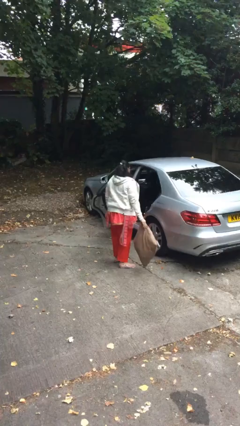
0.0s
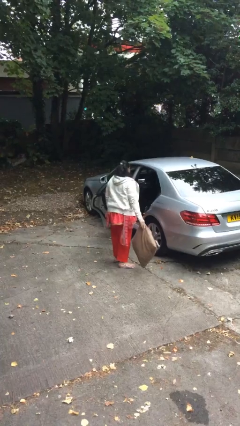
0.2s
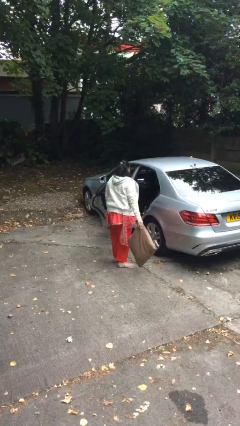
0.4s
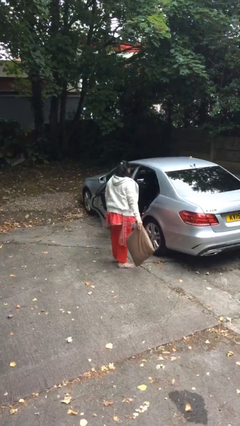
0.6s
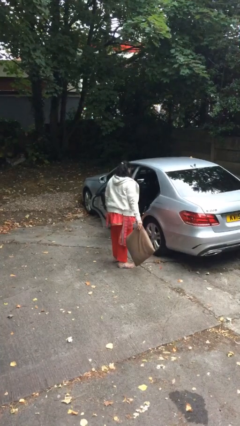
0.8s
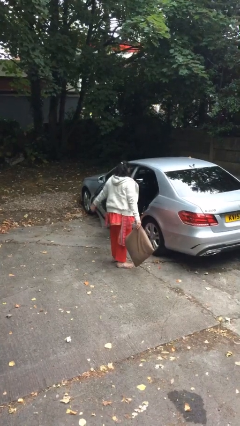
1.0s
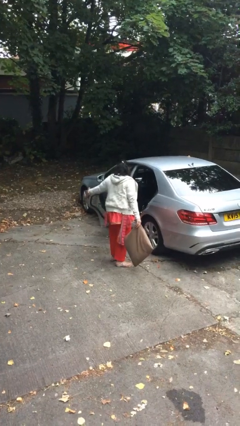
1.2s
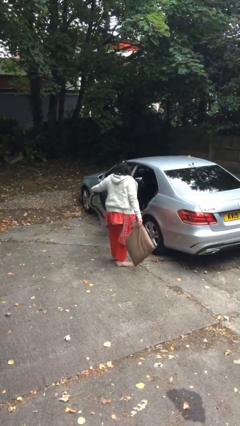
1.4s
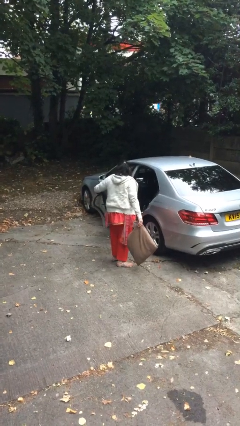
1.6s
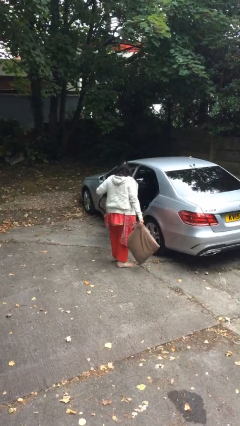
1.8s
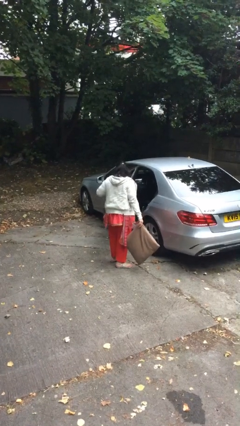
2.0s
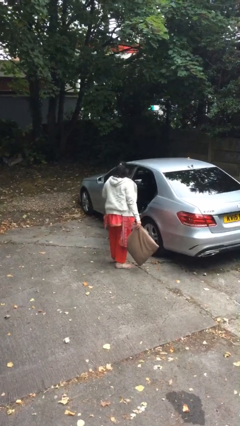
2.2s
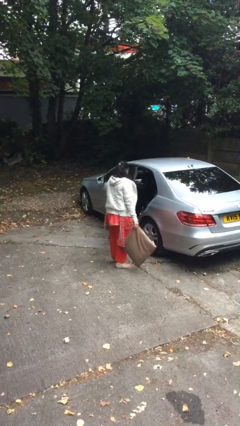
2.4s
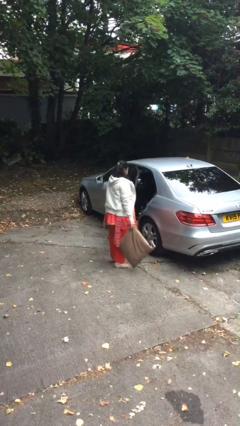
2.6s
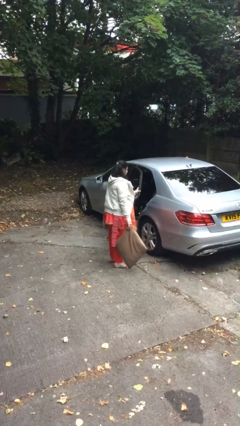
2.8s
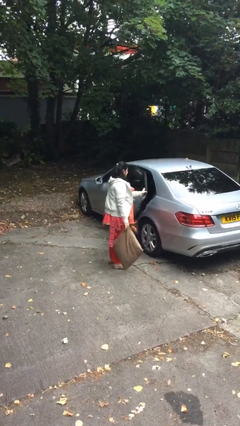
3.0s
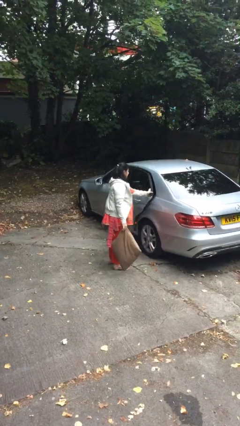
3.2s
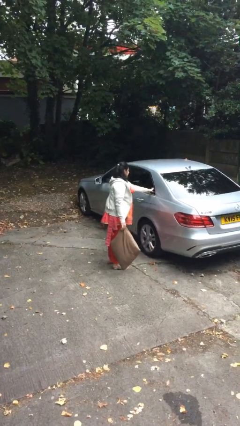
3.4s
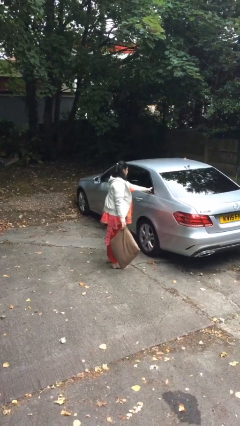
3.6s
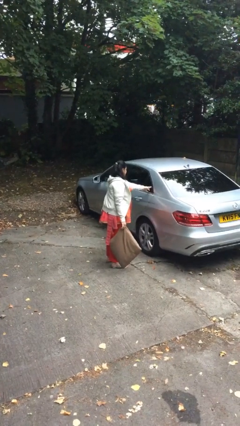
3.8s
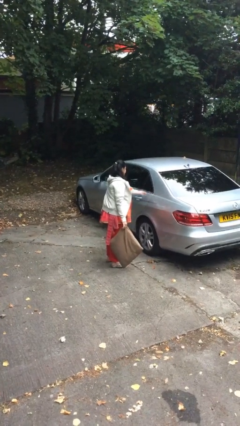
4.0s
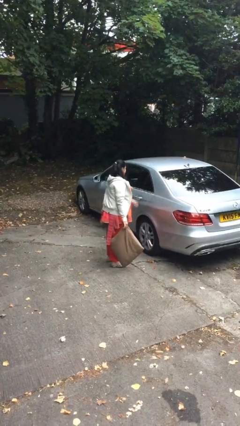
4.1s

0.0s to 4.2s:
person closes car door

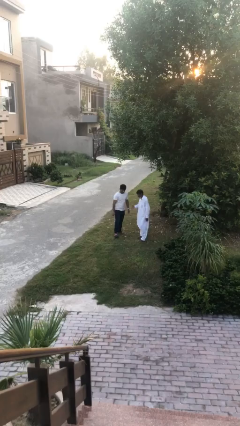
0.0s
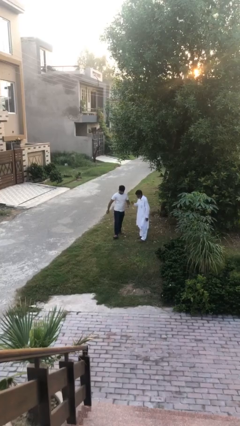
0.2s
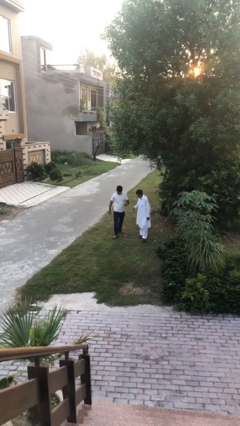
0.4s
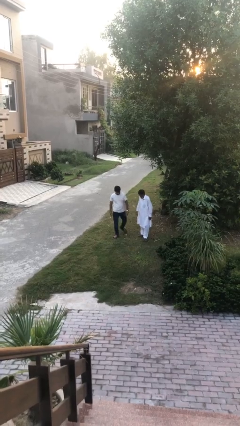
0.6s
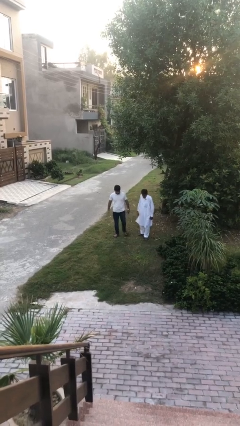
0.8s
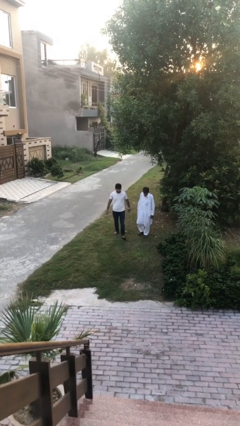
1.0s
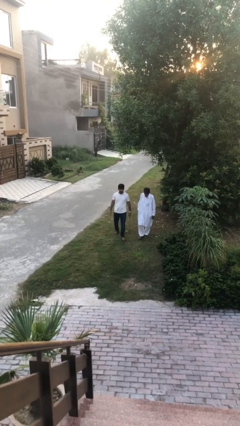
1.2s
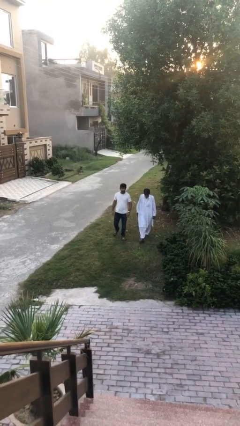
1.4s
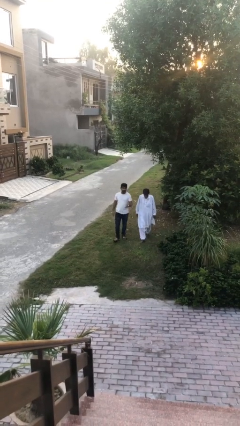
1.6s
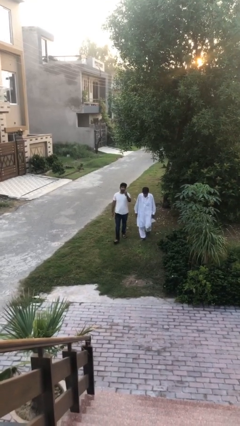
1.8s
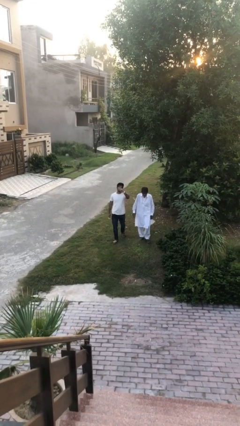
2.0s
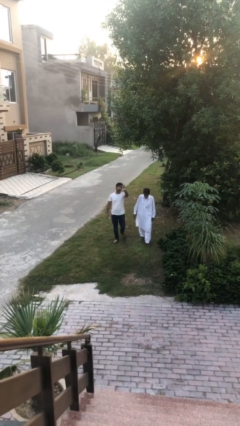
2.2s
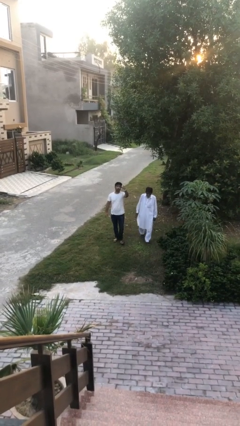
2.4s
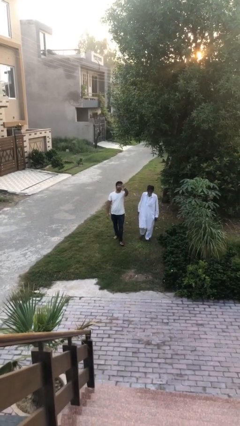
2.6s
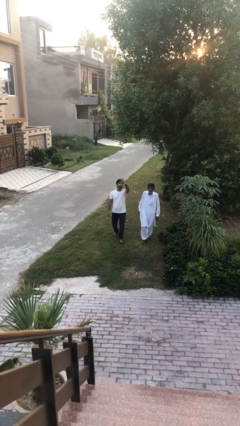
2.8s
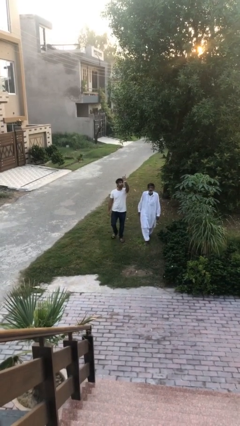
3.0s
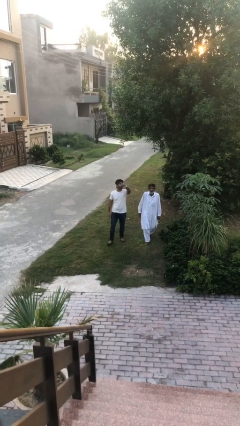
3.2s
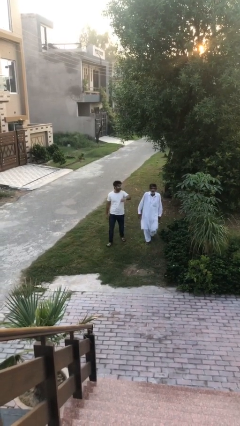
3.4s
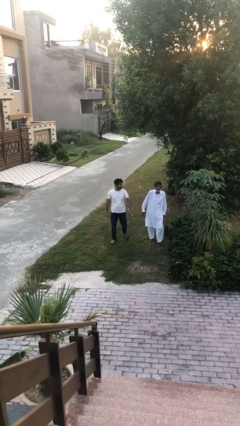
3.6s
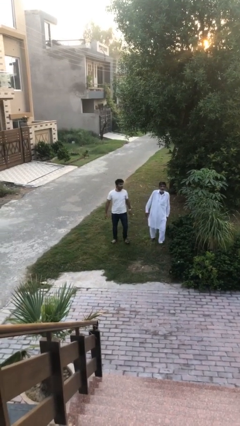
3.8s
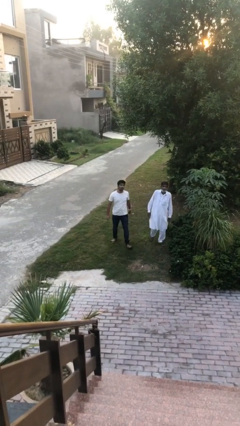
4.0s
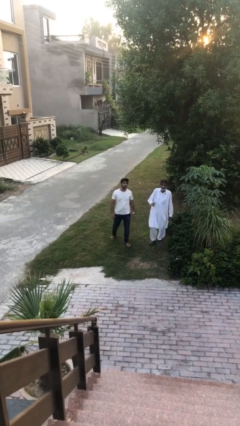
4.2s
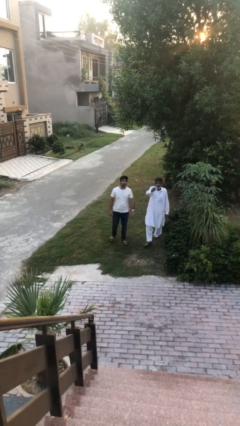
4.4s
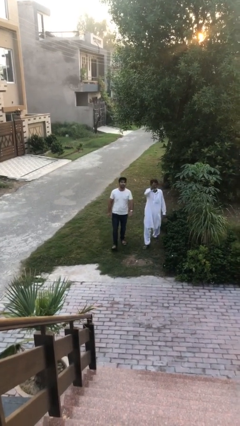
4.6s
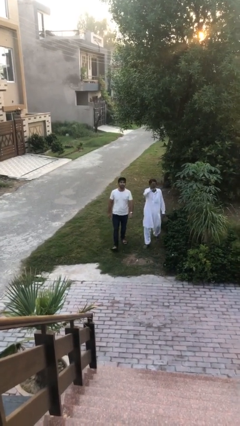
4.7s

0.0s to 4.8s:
person talks to person

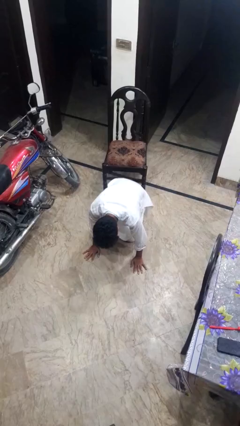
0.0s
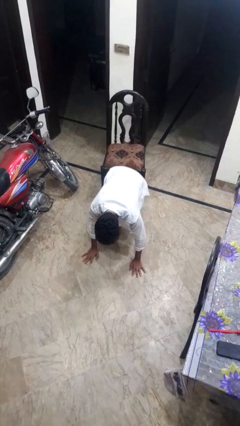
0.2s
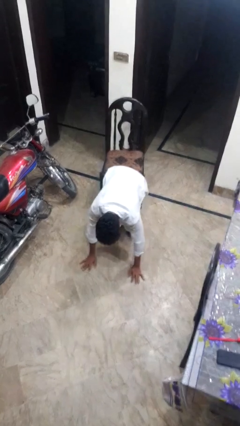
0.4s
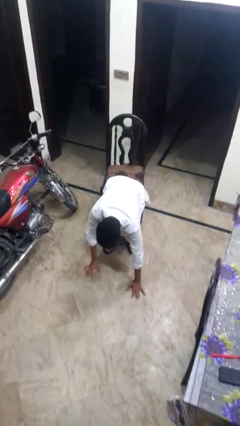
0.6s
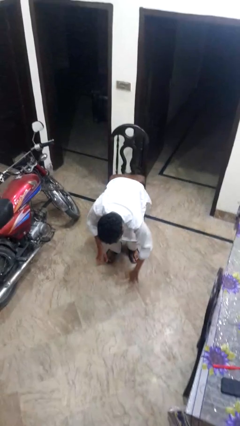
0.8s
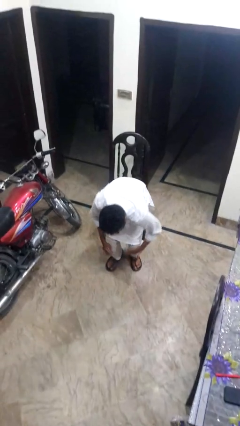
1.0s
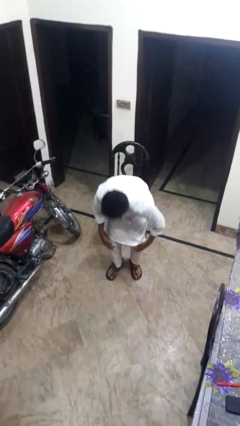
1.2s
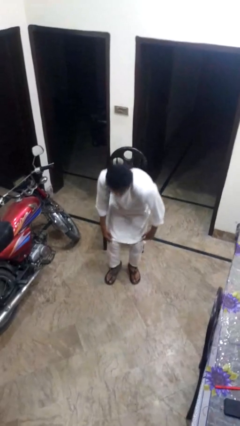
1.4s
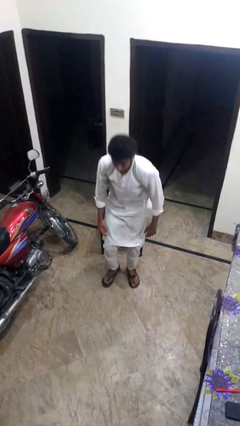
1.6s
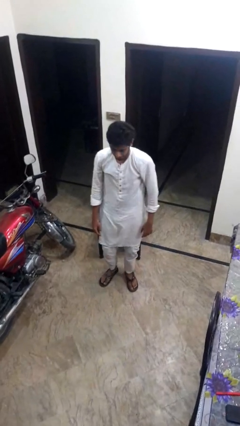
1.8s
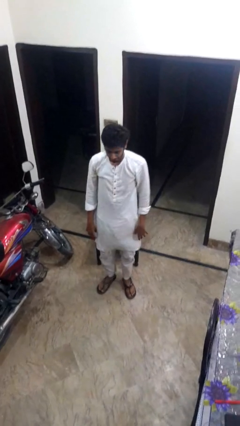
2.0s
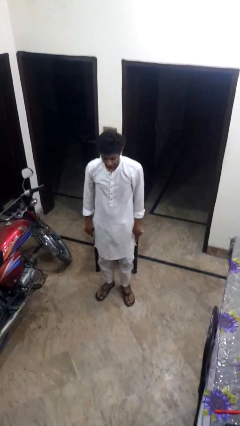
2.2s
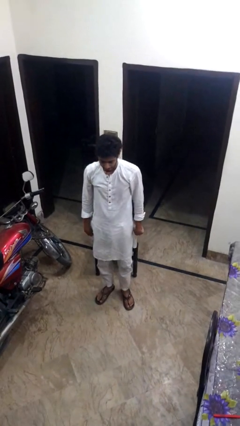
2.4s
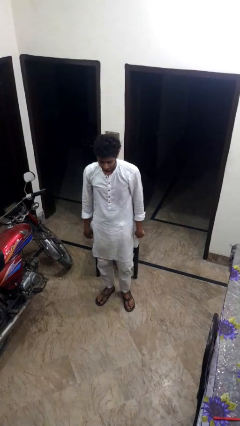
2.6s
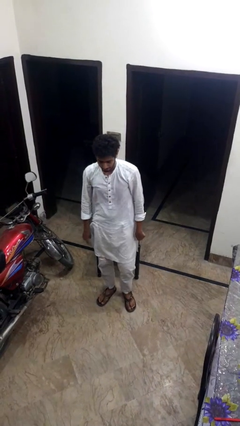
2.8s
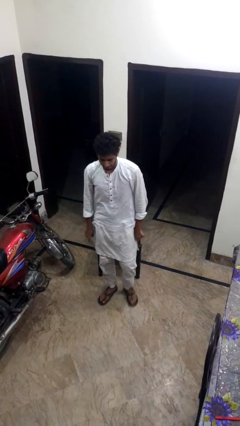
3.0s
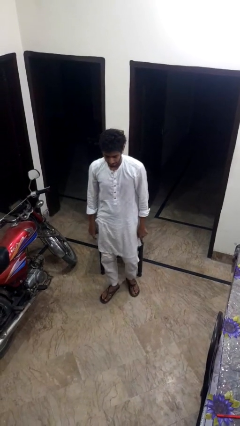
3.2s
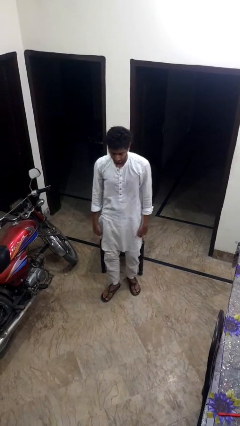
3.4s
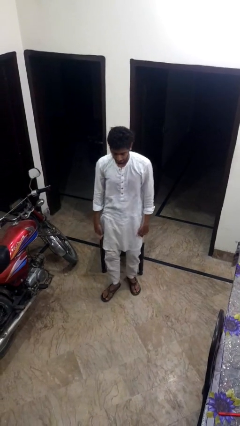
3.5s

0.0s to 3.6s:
person stands up from floor

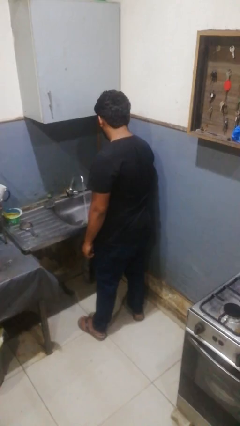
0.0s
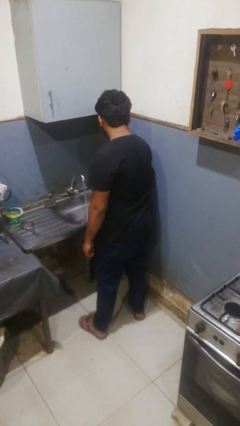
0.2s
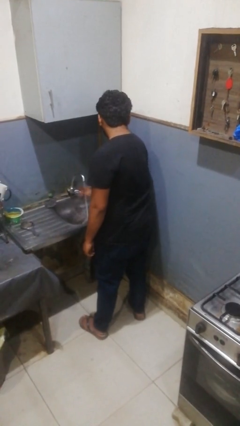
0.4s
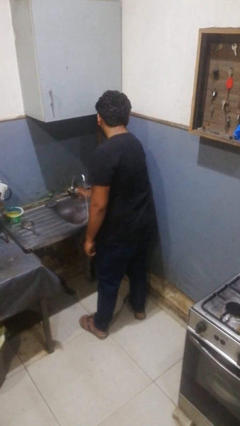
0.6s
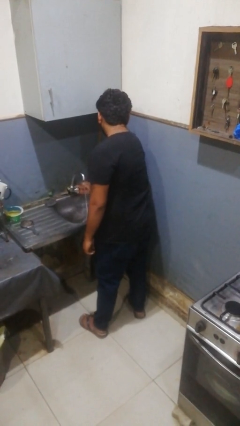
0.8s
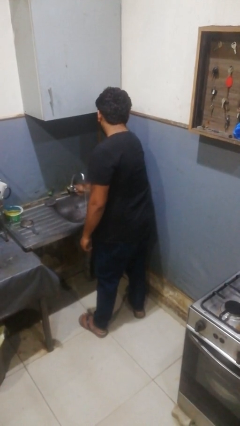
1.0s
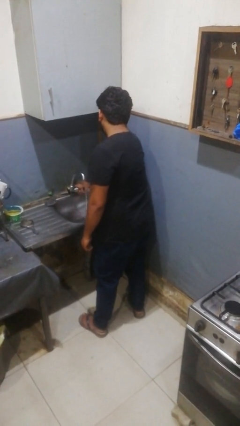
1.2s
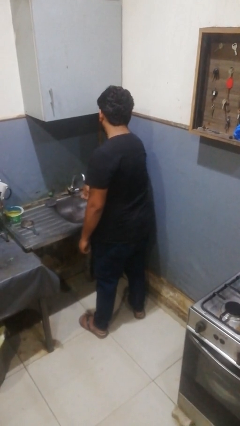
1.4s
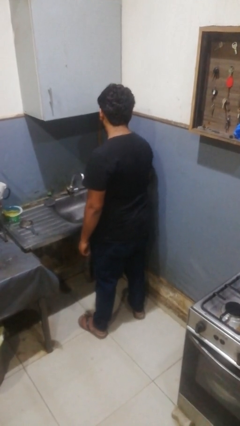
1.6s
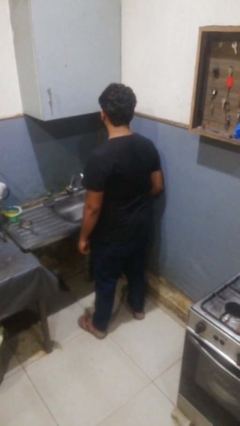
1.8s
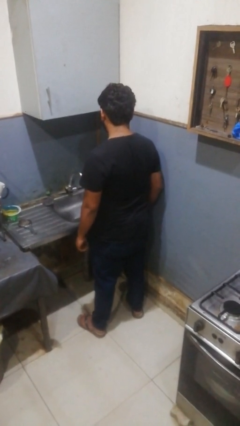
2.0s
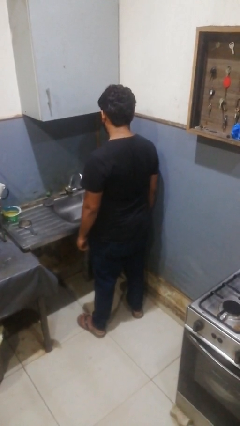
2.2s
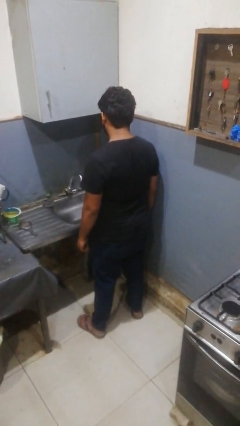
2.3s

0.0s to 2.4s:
person turns off faucet

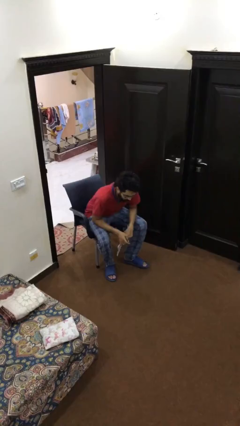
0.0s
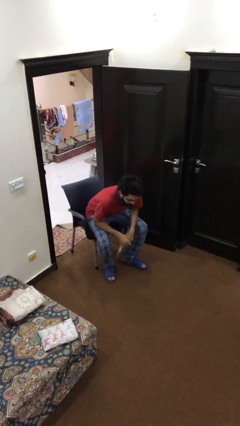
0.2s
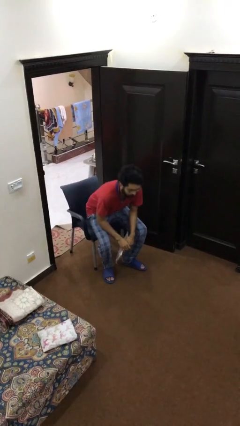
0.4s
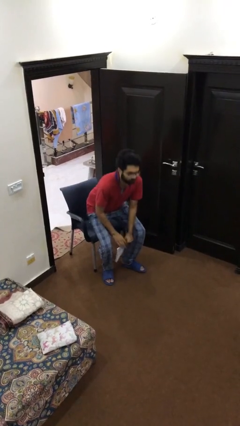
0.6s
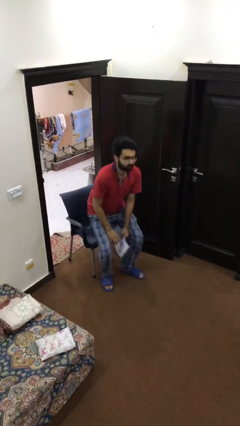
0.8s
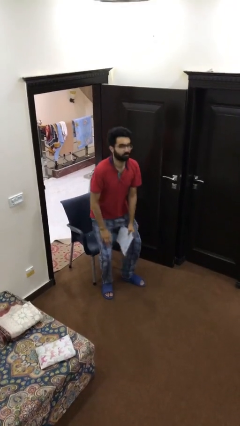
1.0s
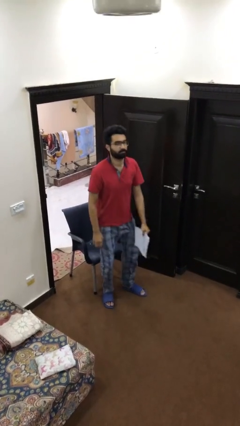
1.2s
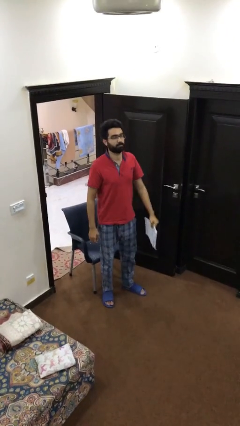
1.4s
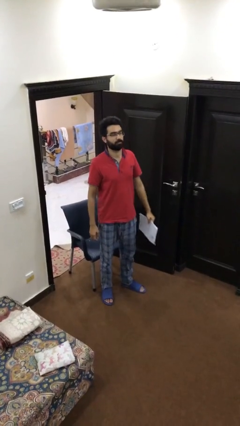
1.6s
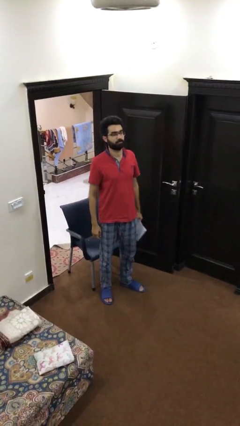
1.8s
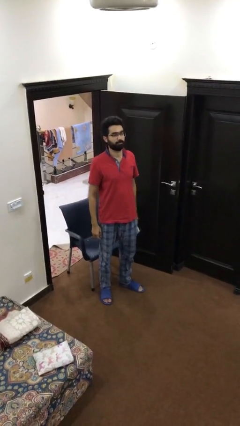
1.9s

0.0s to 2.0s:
person stands up

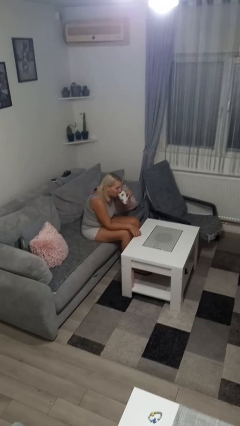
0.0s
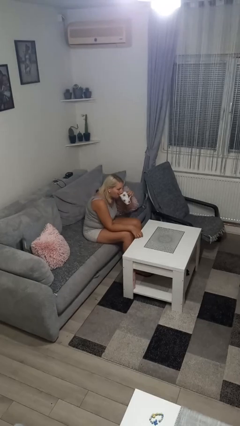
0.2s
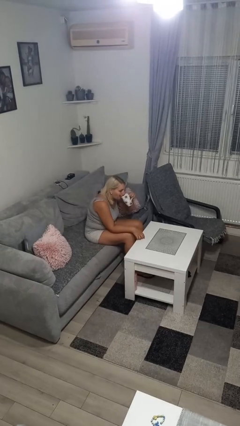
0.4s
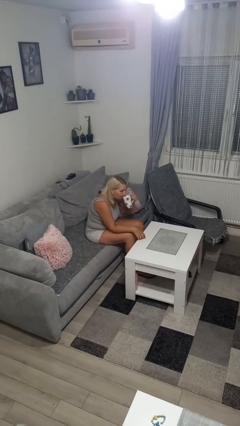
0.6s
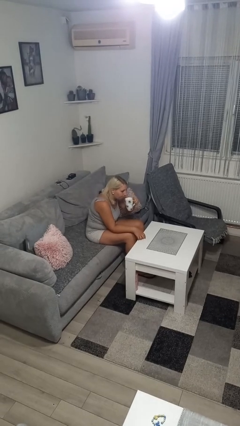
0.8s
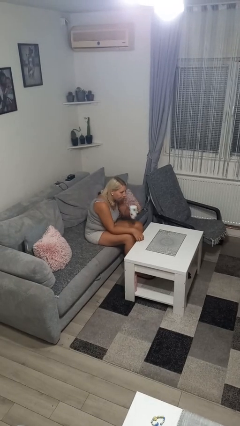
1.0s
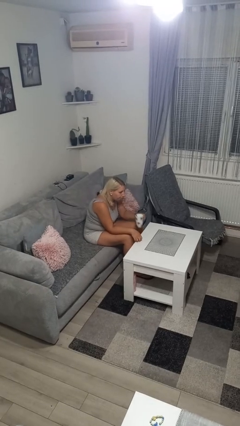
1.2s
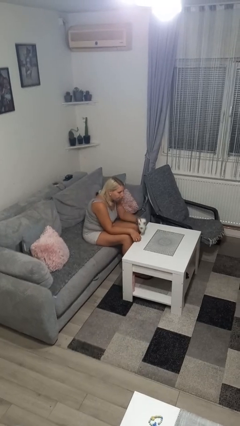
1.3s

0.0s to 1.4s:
person drinks from mug
